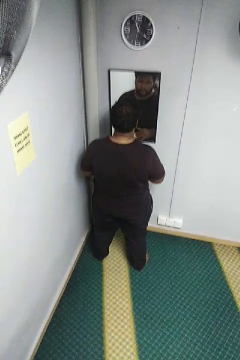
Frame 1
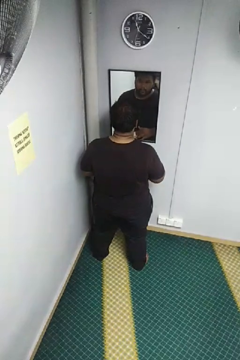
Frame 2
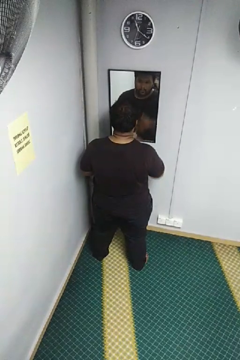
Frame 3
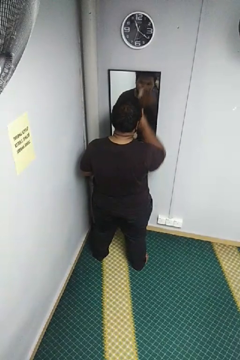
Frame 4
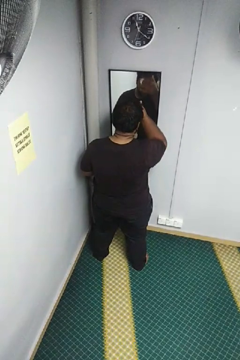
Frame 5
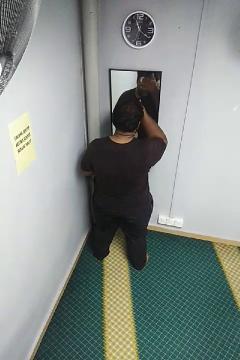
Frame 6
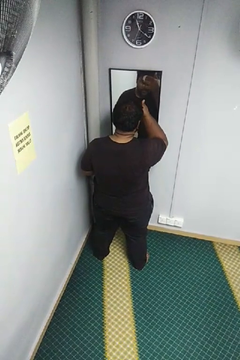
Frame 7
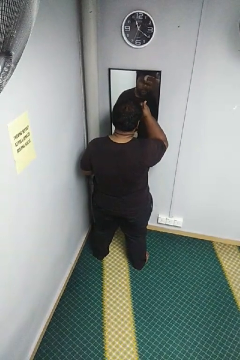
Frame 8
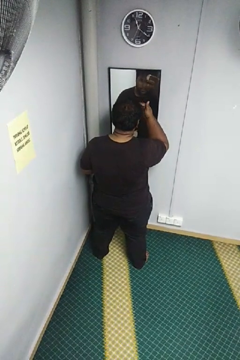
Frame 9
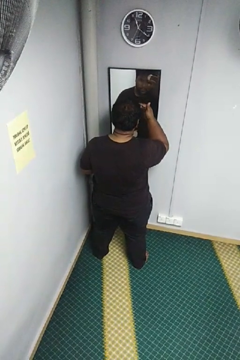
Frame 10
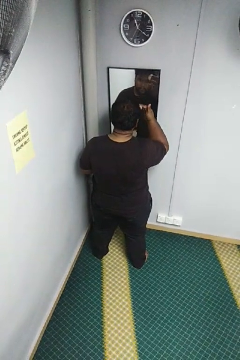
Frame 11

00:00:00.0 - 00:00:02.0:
person applies foundation makeup

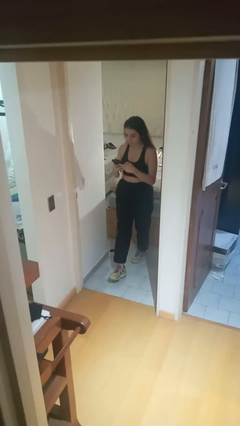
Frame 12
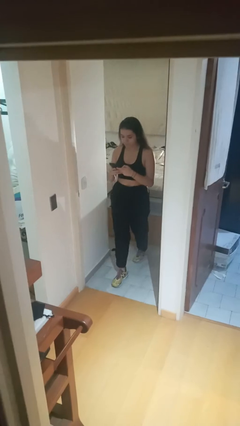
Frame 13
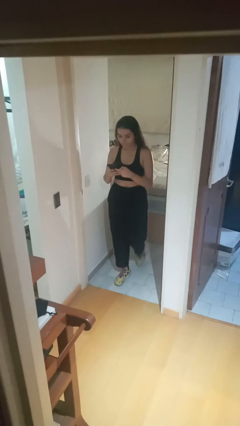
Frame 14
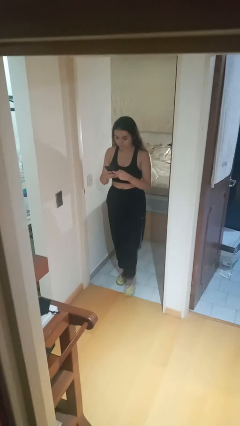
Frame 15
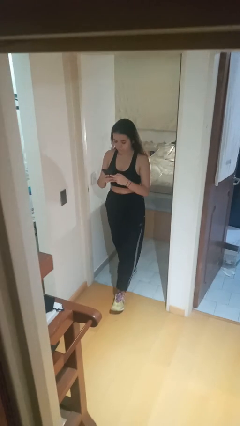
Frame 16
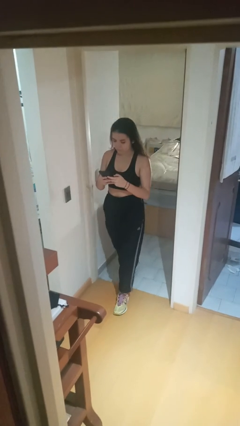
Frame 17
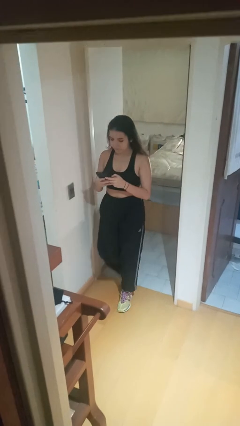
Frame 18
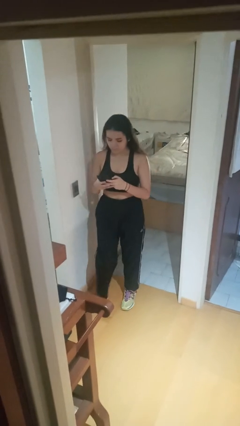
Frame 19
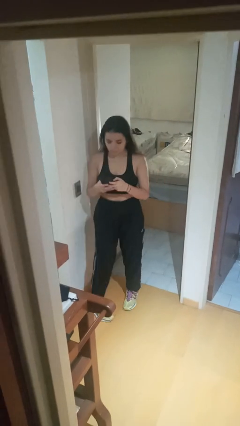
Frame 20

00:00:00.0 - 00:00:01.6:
person enters scene through structure

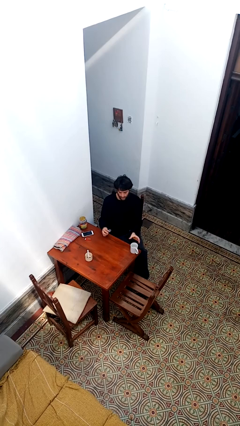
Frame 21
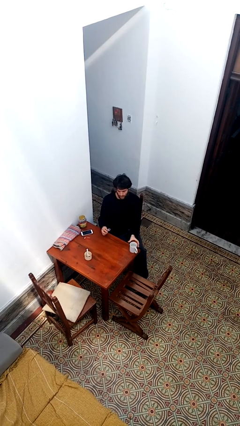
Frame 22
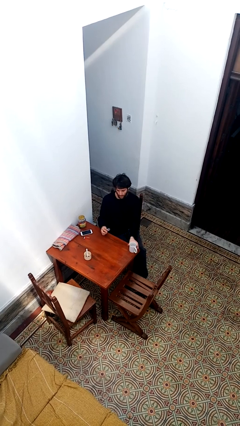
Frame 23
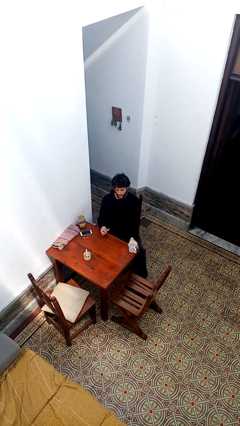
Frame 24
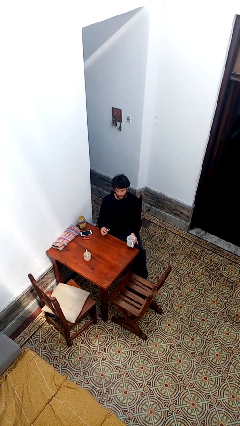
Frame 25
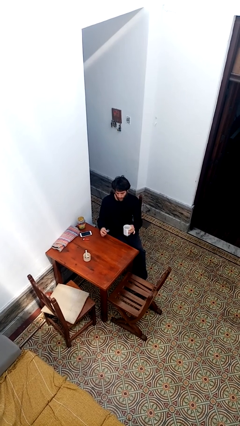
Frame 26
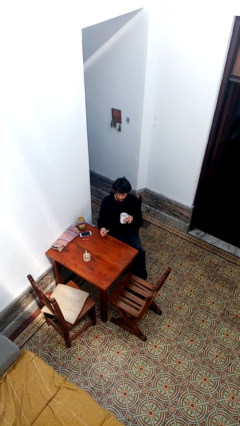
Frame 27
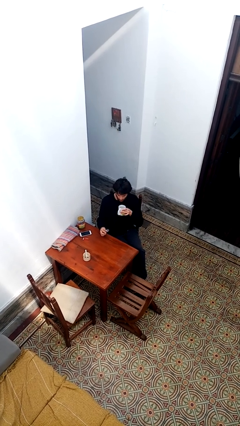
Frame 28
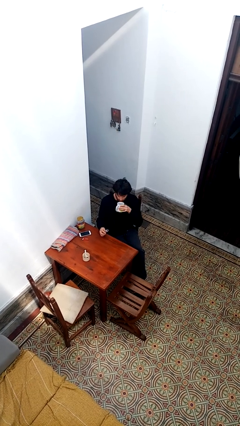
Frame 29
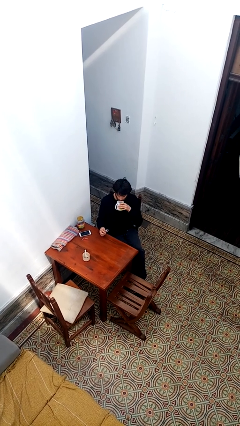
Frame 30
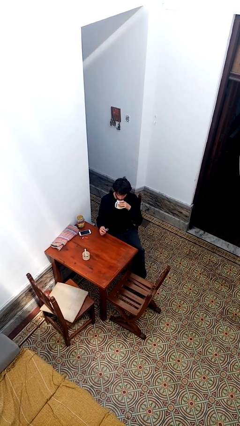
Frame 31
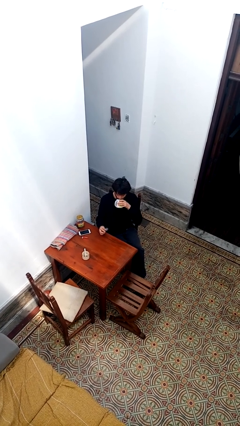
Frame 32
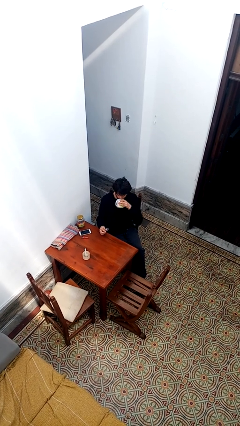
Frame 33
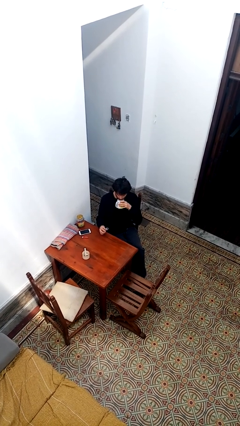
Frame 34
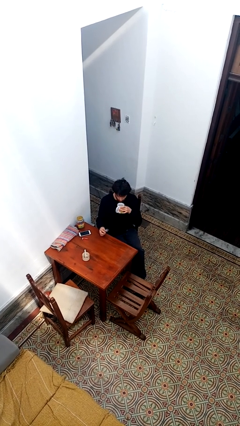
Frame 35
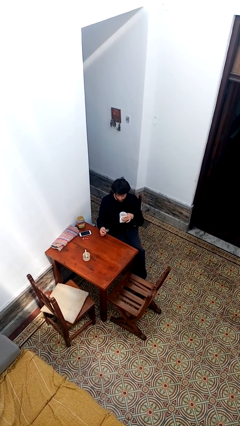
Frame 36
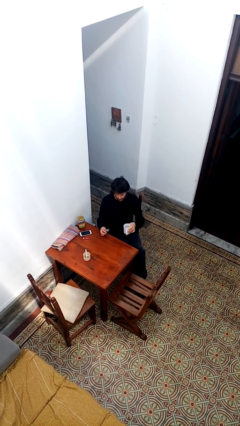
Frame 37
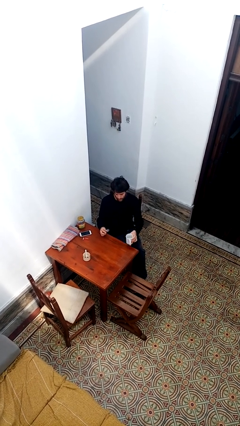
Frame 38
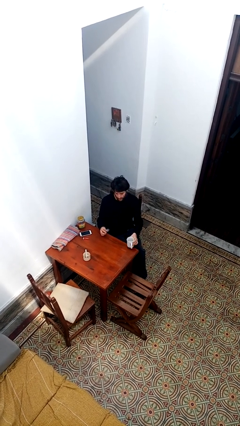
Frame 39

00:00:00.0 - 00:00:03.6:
person drinks from cup

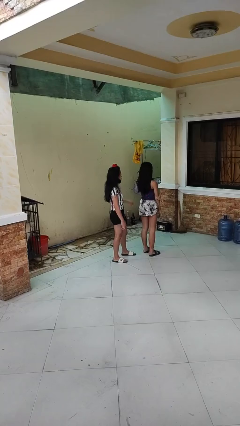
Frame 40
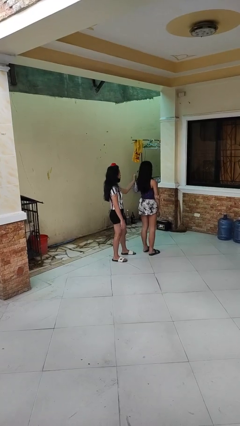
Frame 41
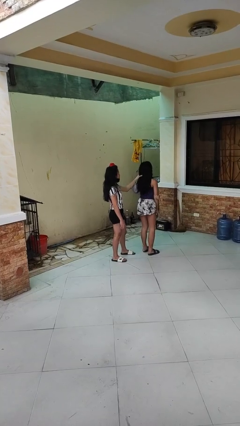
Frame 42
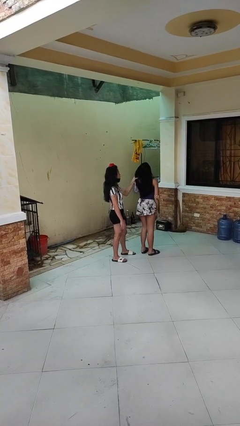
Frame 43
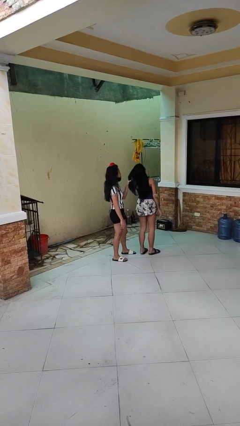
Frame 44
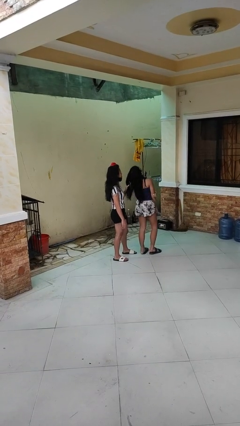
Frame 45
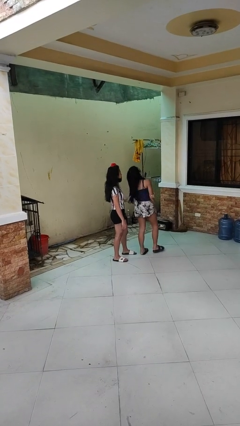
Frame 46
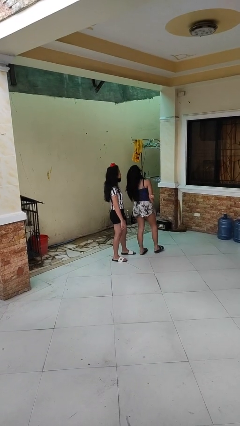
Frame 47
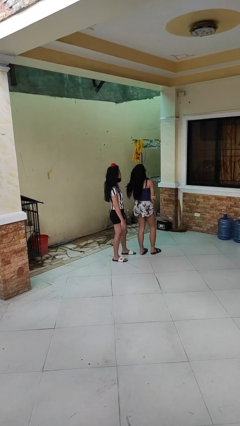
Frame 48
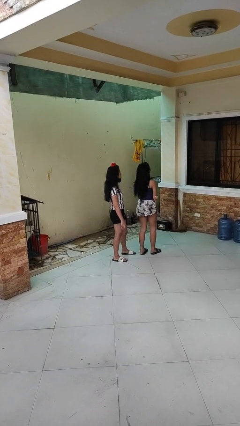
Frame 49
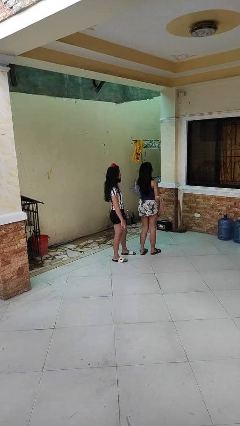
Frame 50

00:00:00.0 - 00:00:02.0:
person grabs person by hair

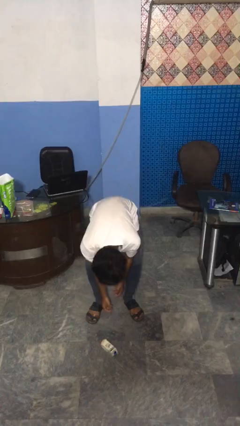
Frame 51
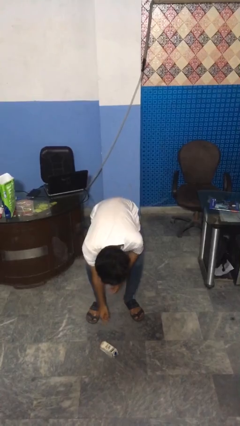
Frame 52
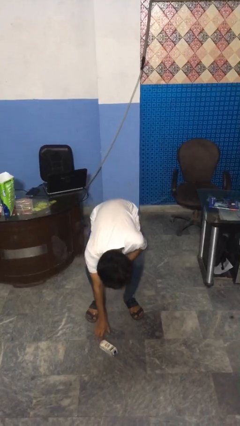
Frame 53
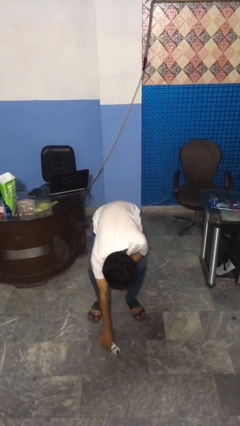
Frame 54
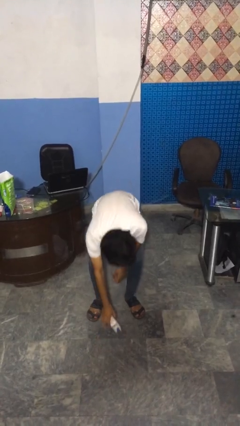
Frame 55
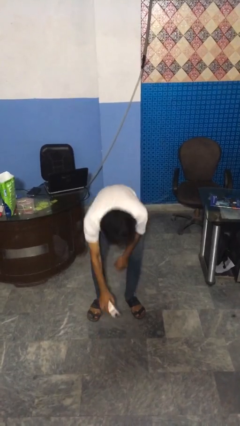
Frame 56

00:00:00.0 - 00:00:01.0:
person catches dropped object

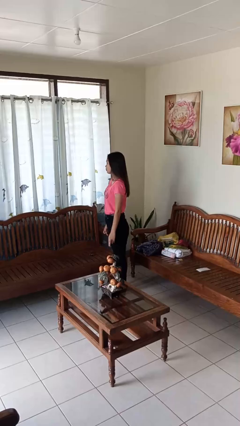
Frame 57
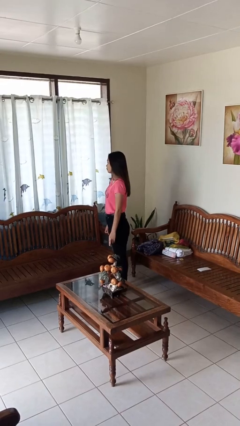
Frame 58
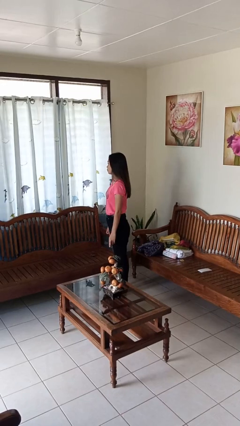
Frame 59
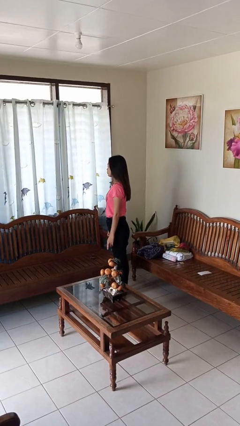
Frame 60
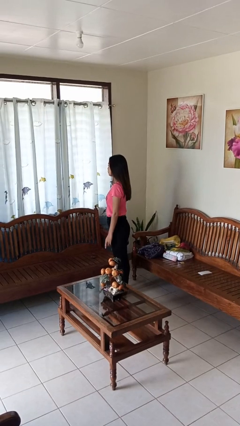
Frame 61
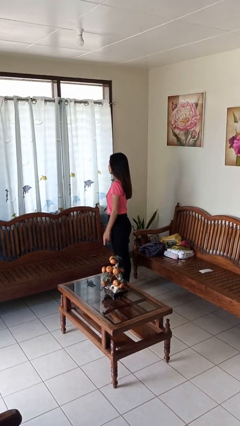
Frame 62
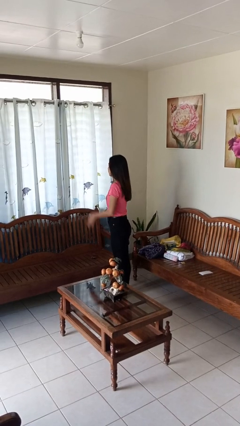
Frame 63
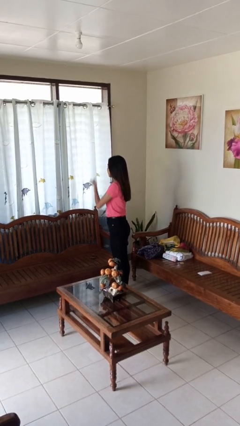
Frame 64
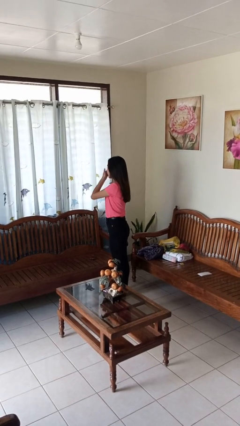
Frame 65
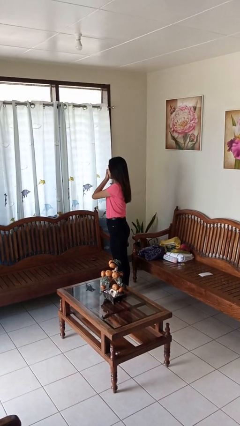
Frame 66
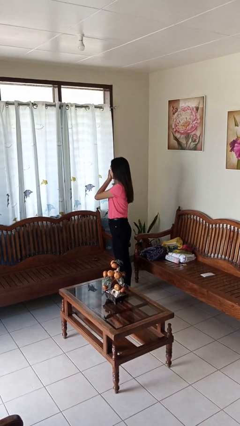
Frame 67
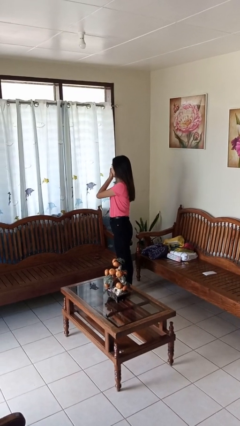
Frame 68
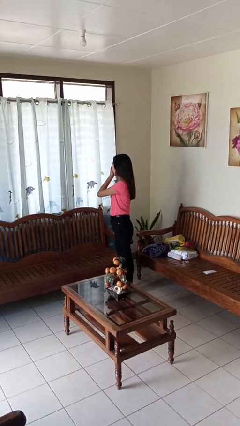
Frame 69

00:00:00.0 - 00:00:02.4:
person yawns

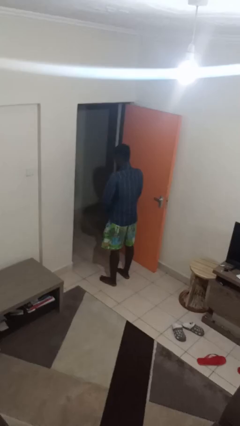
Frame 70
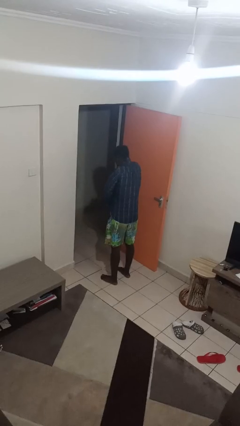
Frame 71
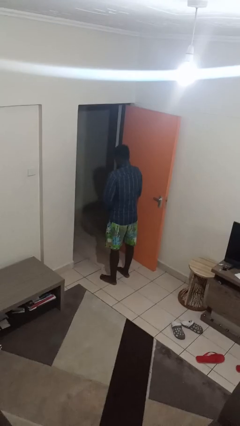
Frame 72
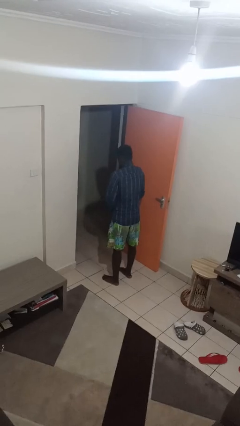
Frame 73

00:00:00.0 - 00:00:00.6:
person unzips jacket

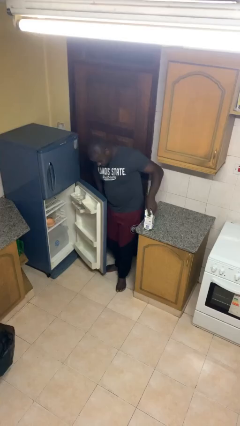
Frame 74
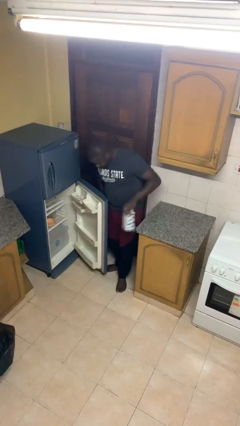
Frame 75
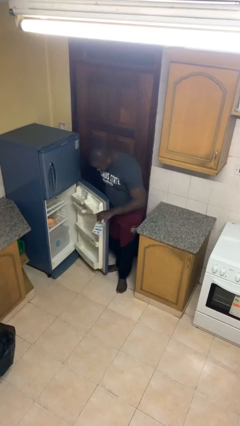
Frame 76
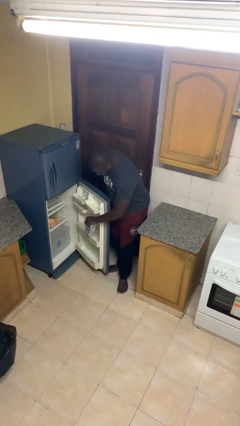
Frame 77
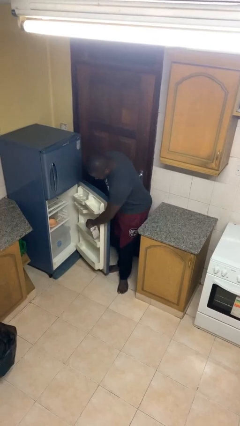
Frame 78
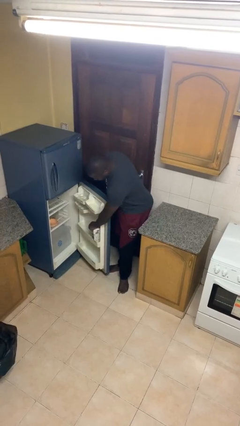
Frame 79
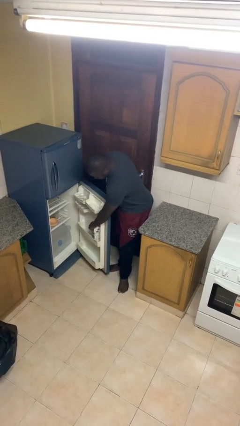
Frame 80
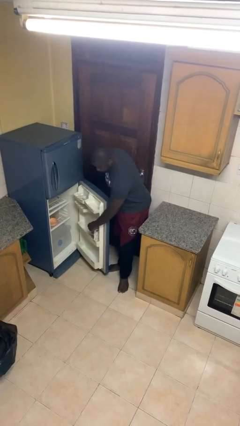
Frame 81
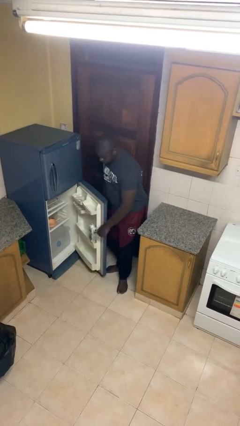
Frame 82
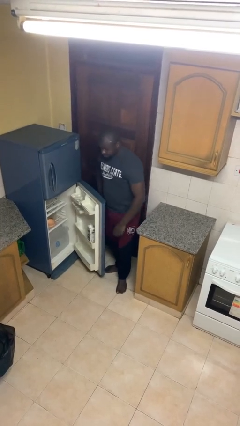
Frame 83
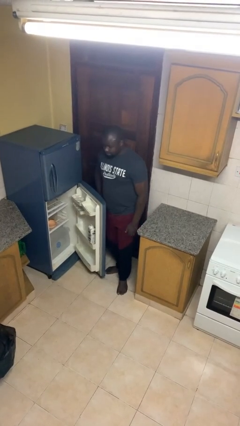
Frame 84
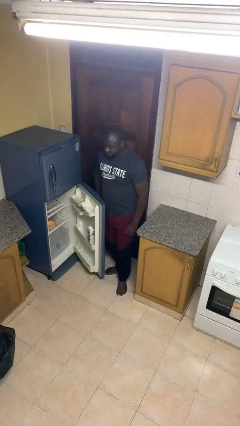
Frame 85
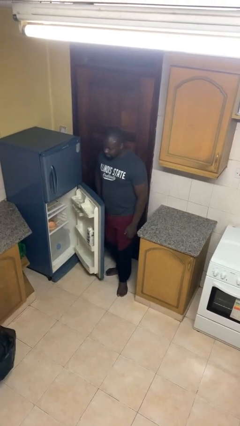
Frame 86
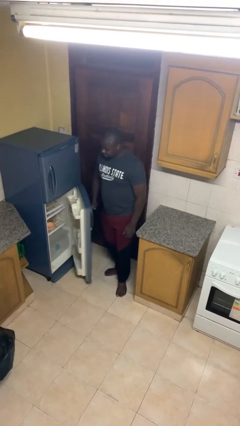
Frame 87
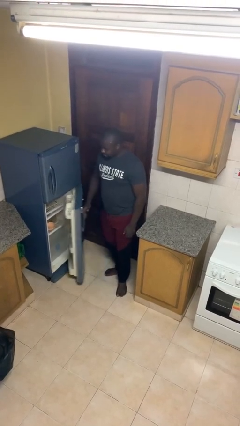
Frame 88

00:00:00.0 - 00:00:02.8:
person puts object into refrigerator

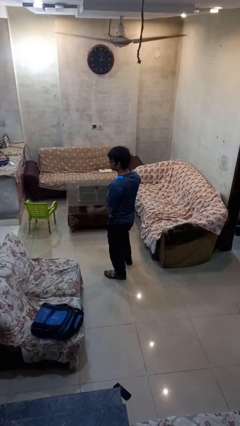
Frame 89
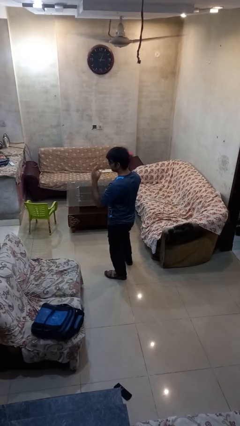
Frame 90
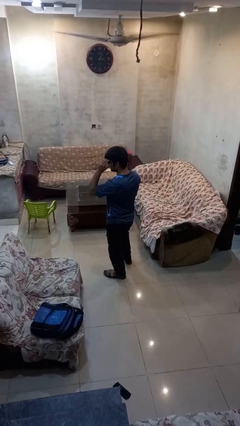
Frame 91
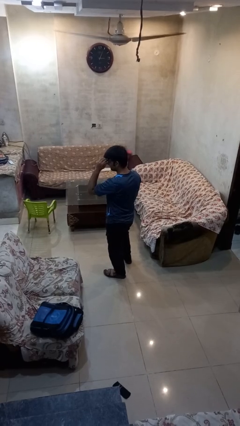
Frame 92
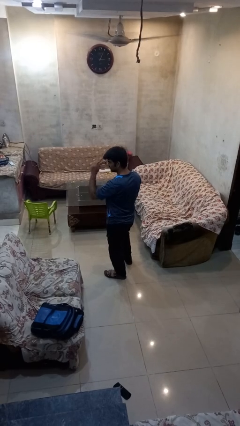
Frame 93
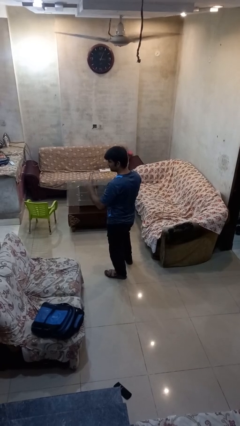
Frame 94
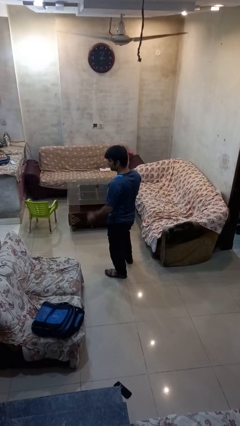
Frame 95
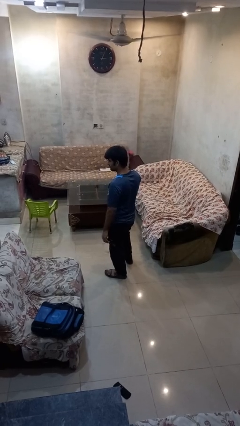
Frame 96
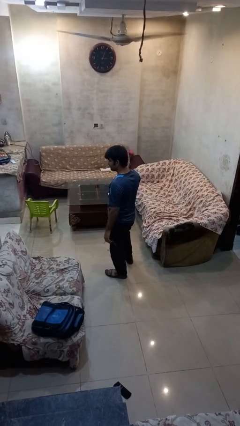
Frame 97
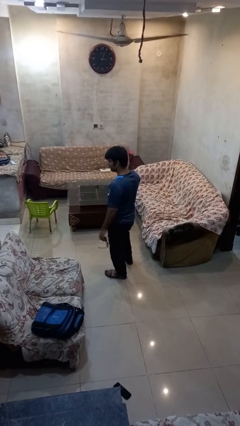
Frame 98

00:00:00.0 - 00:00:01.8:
person takes off sunglasses
